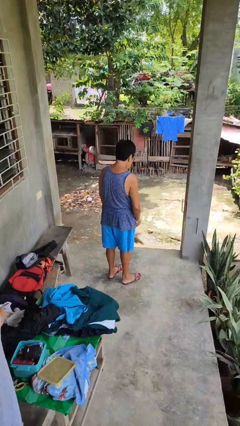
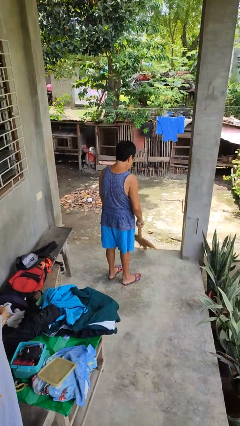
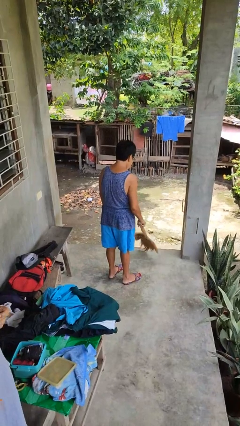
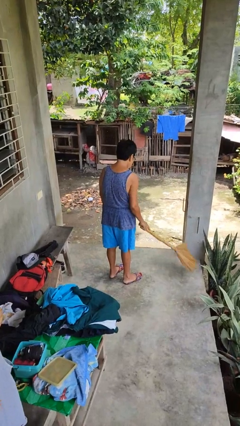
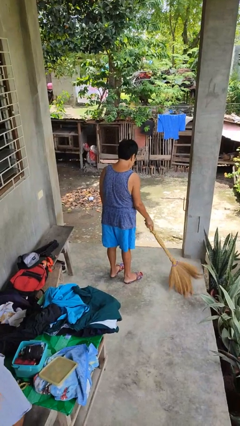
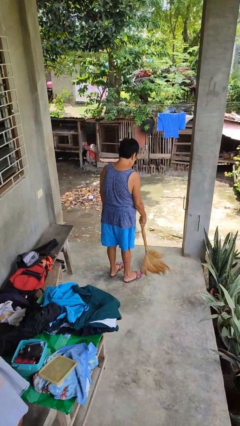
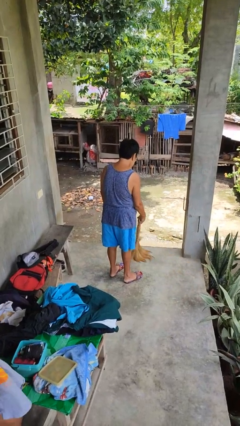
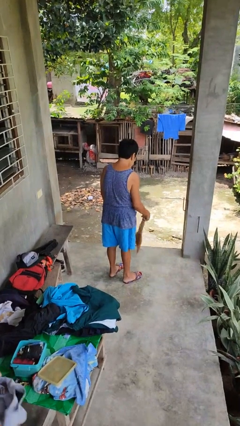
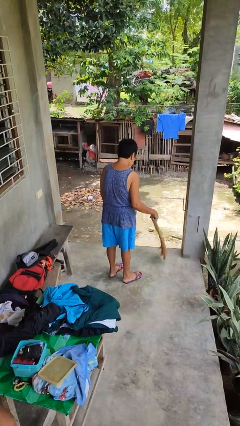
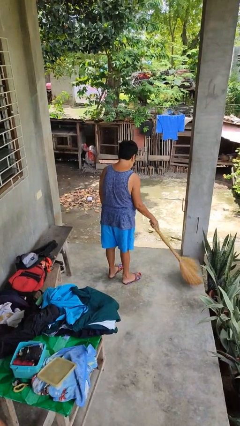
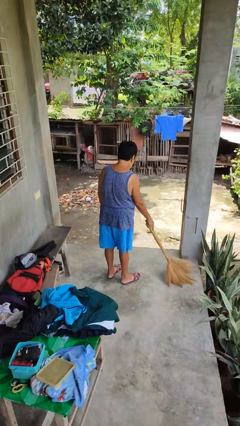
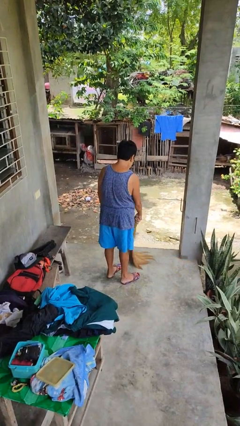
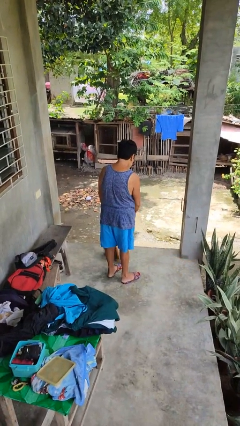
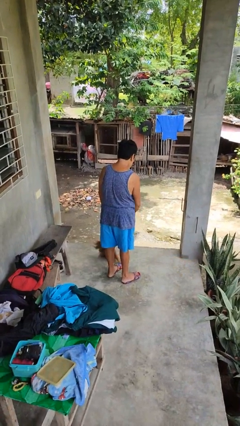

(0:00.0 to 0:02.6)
person sweeps floor

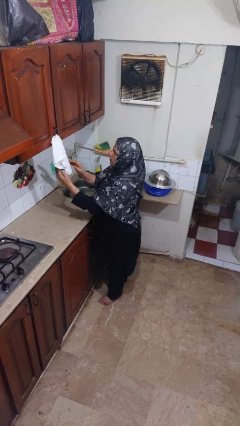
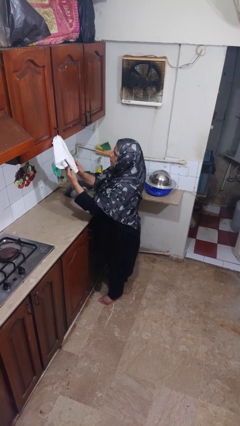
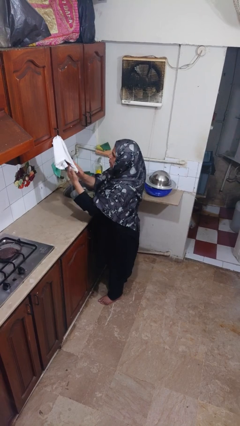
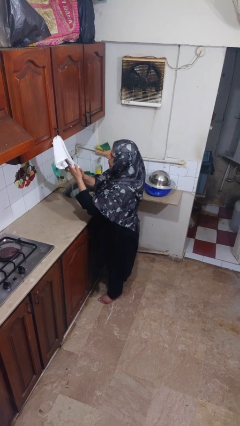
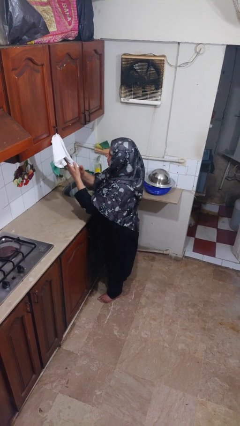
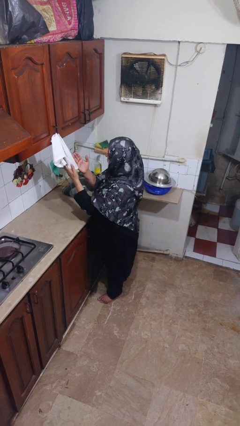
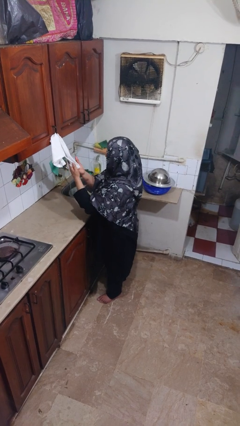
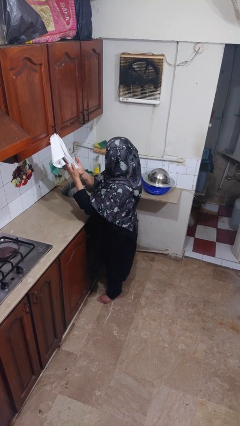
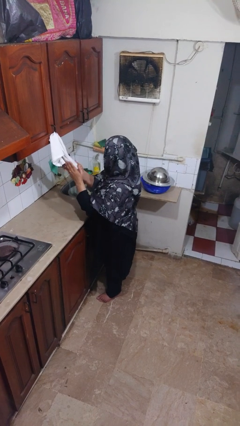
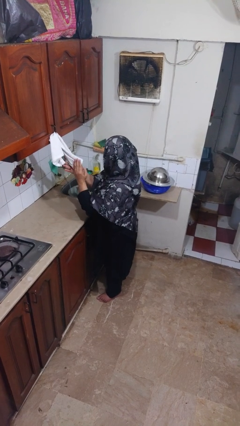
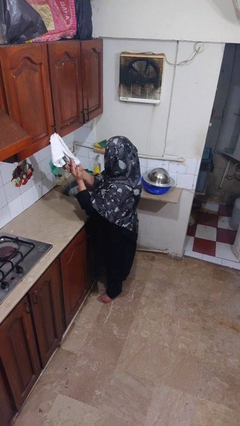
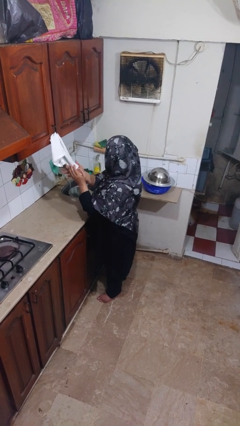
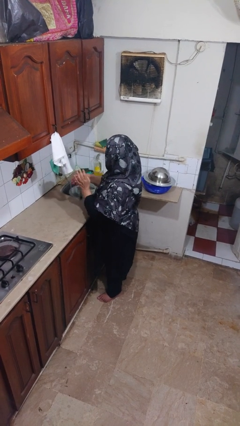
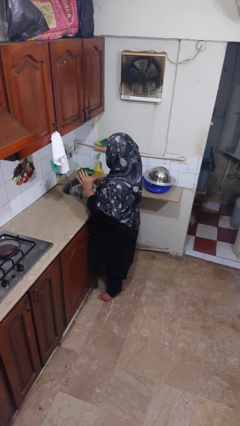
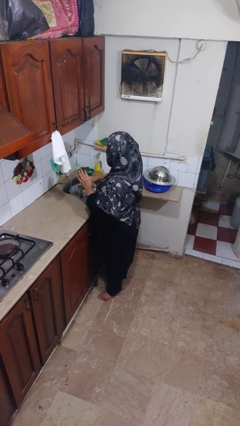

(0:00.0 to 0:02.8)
person dries hands with towel

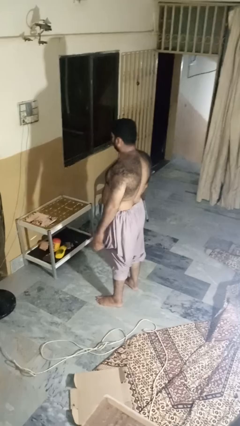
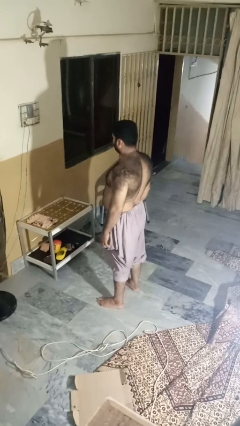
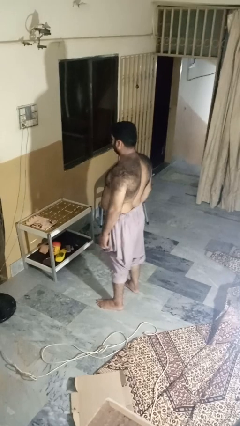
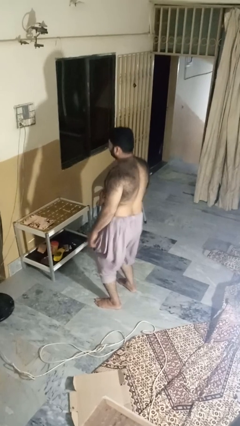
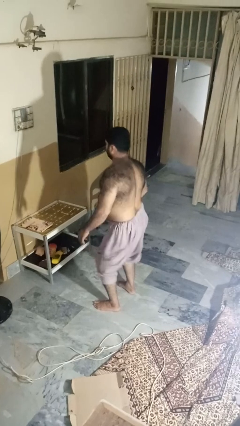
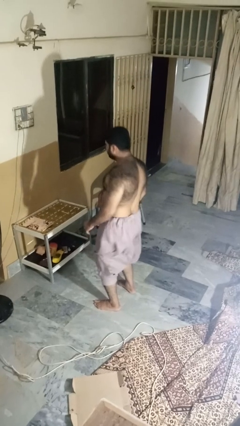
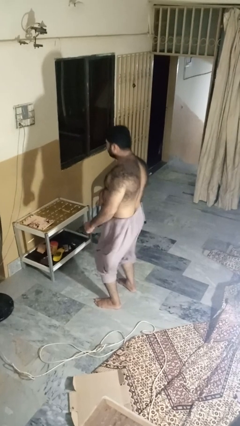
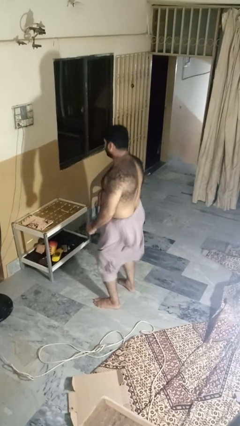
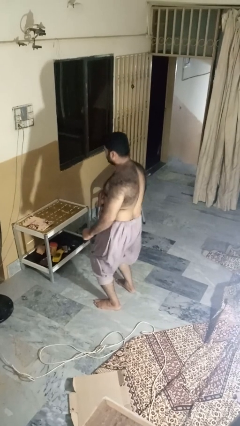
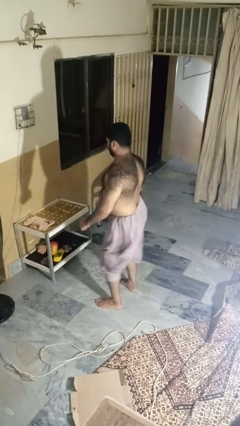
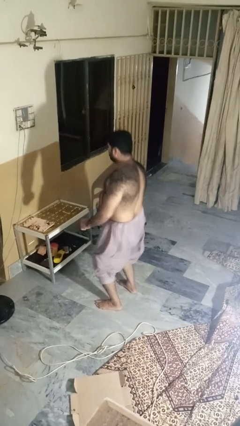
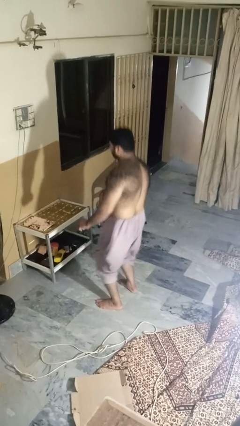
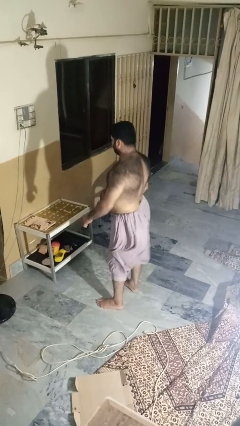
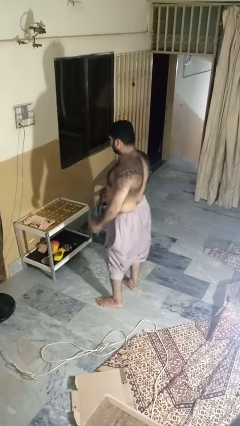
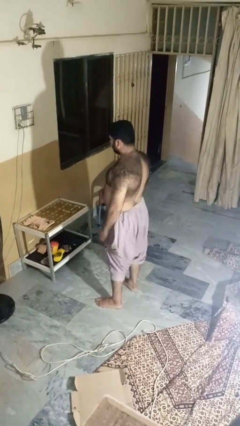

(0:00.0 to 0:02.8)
person dances in place

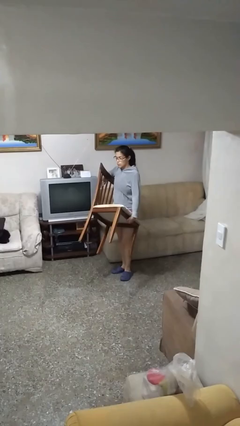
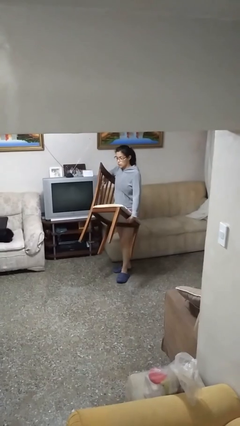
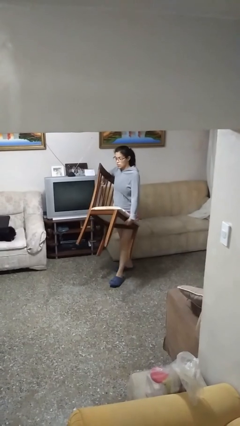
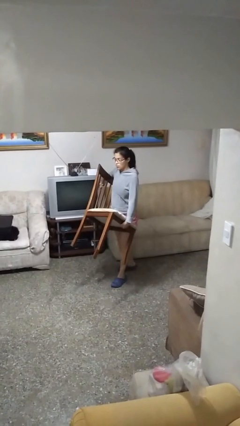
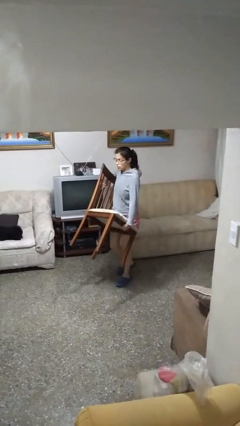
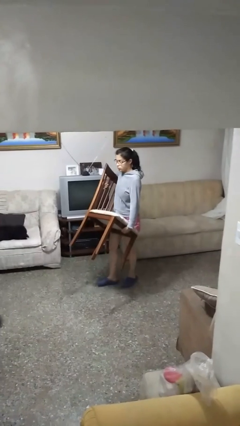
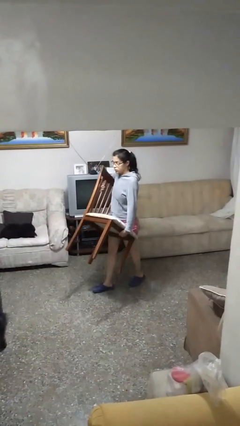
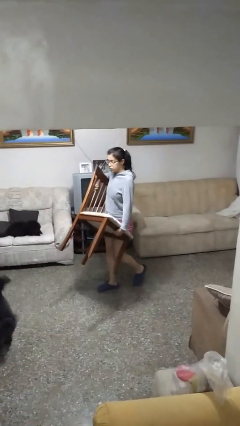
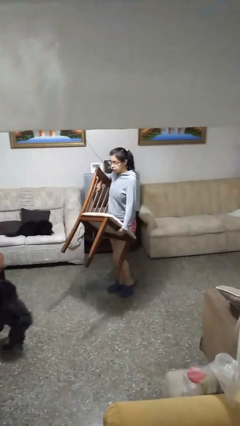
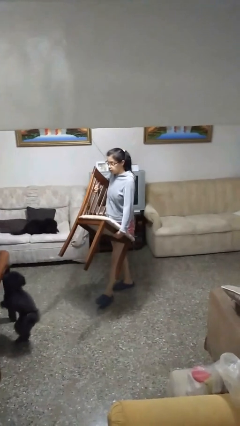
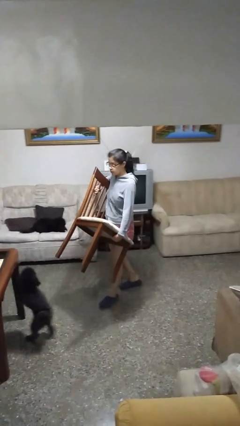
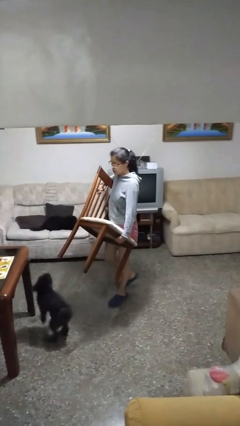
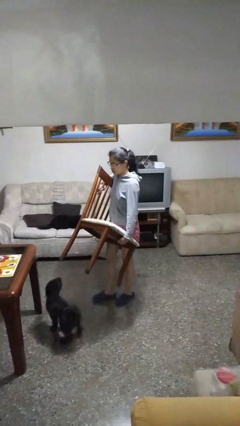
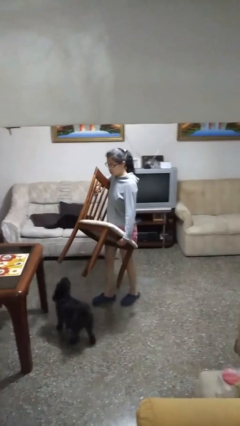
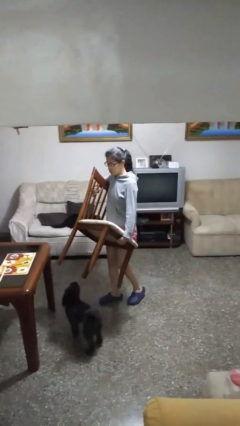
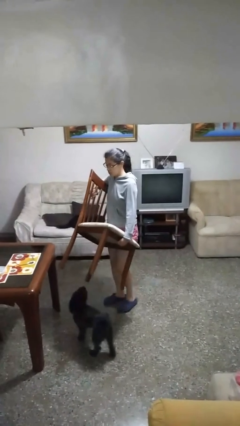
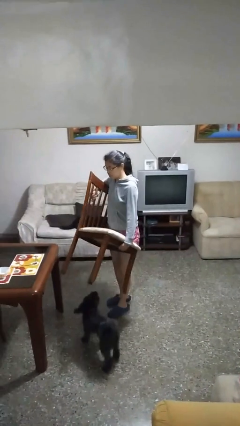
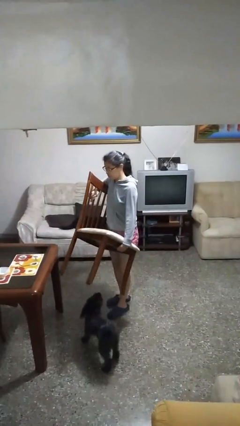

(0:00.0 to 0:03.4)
person carries furniture

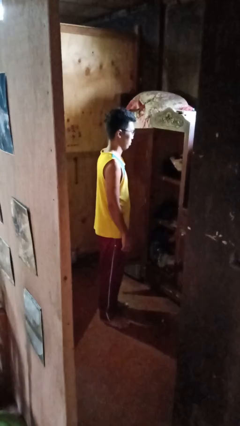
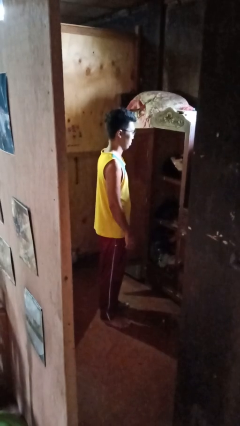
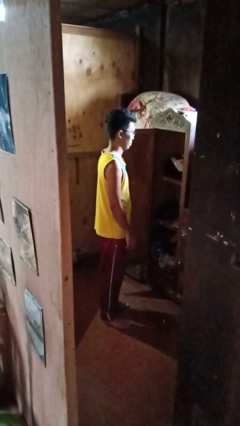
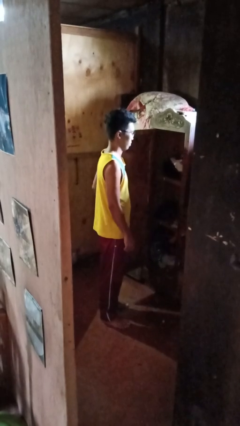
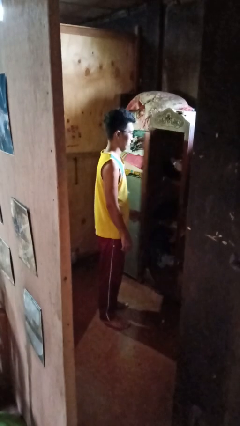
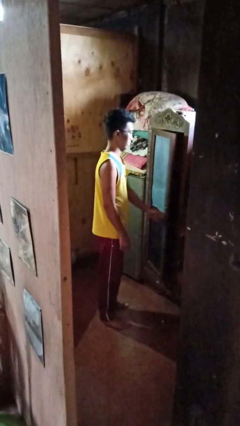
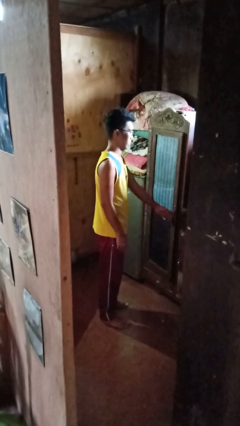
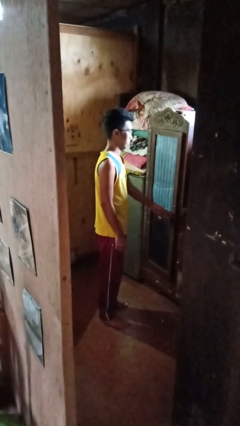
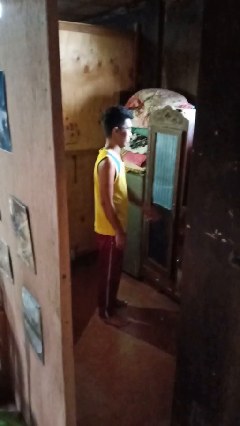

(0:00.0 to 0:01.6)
person closes closet door

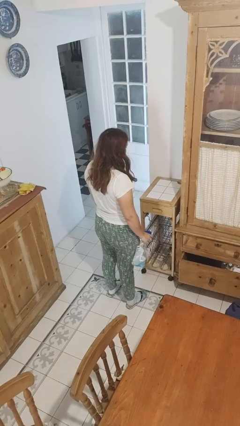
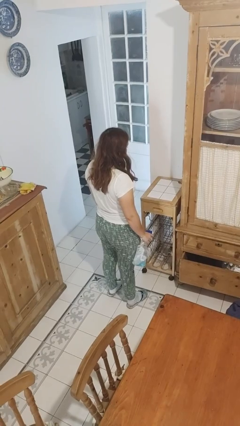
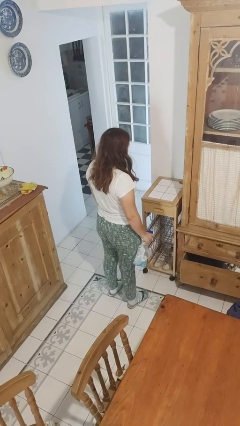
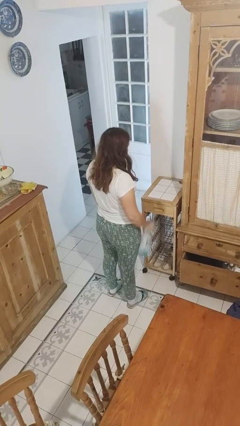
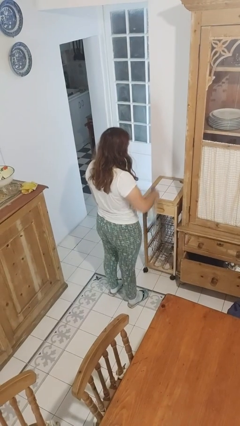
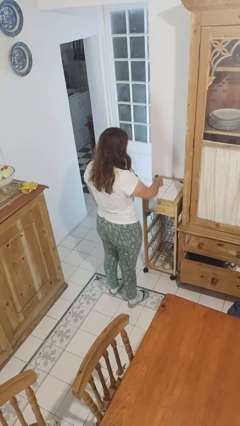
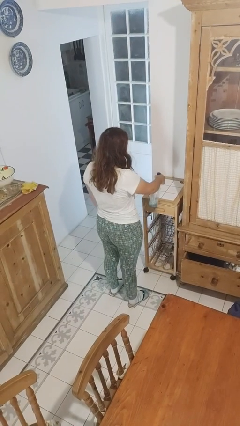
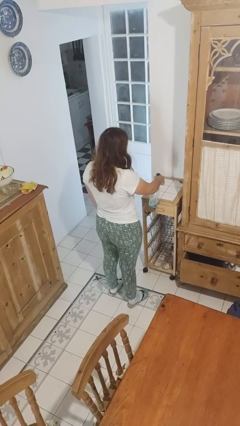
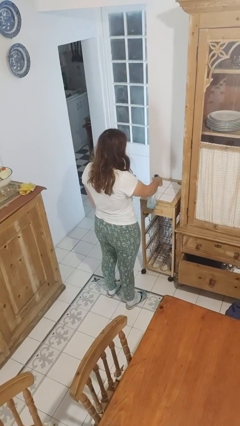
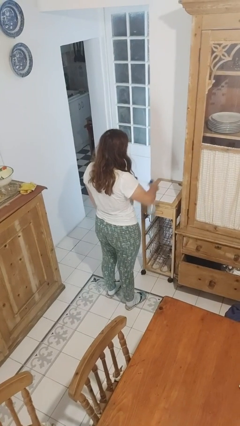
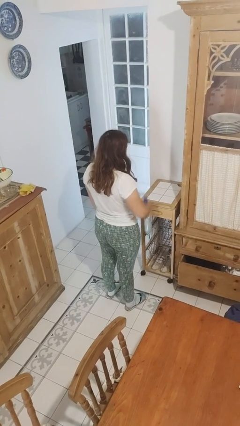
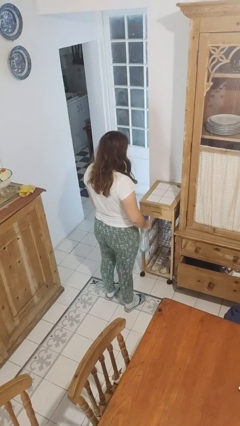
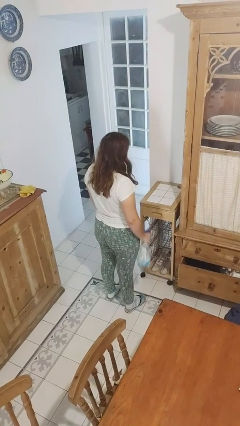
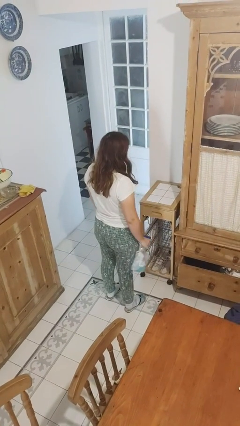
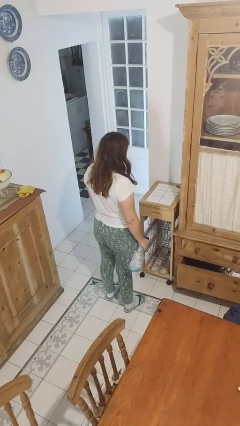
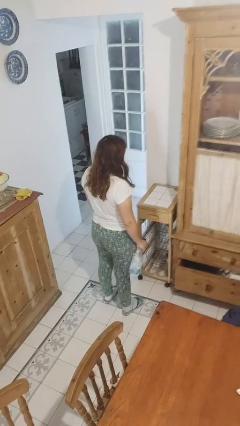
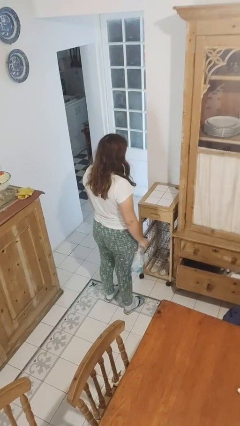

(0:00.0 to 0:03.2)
person sprays from bottle

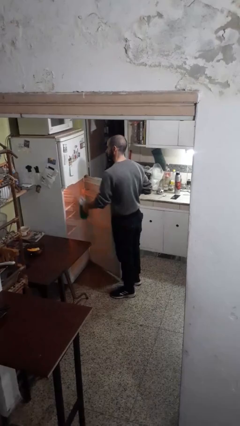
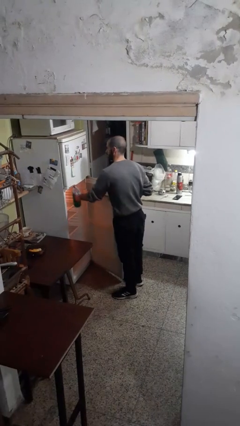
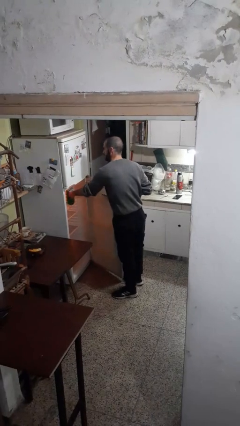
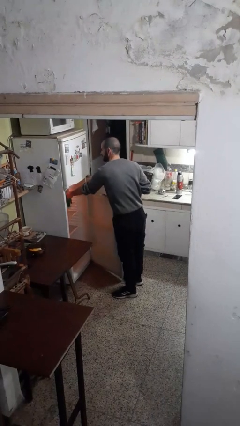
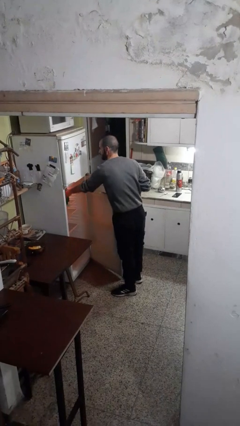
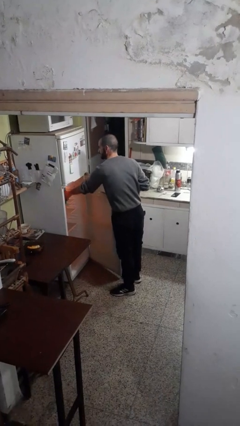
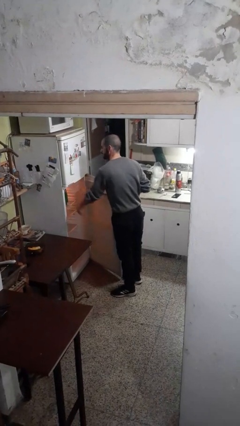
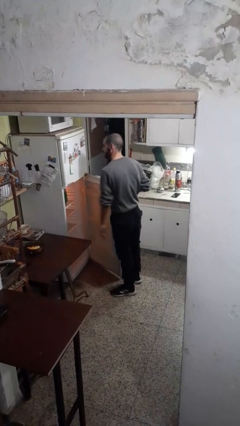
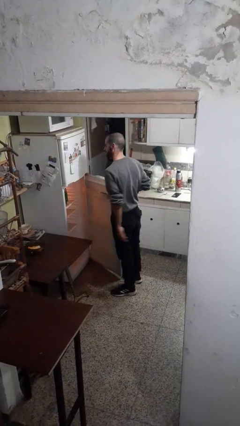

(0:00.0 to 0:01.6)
person puts object into refrigerator
